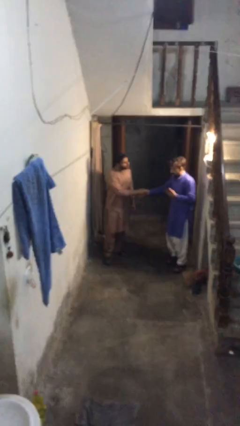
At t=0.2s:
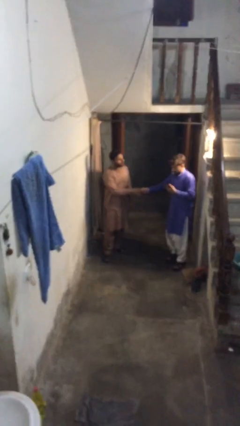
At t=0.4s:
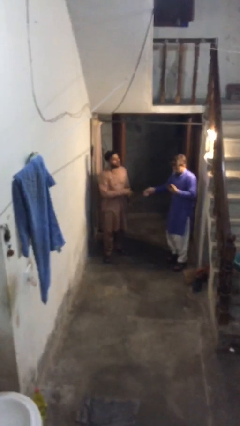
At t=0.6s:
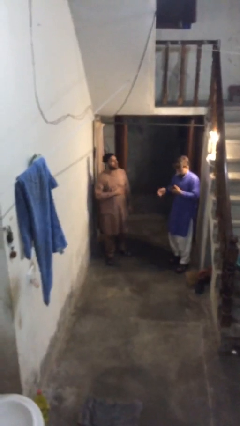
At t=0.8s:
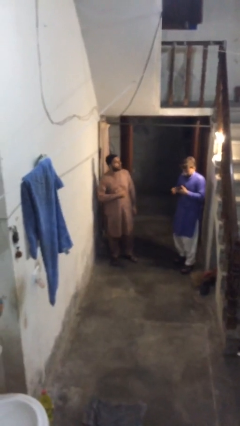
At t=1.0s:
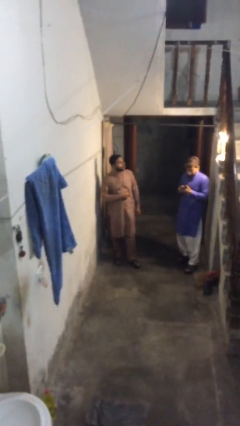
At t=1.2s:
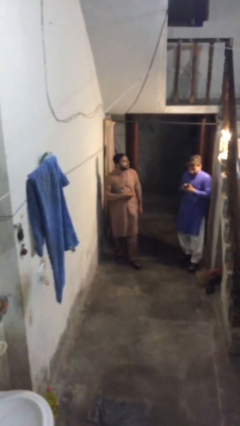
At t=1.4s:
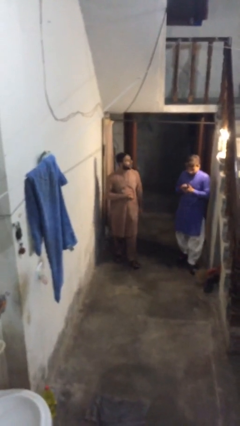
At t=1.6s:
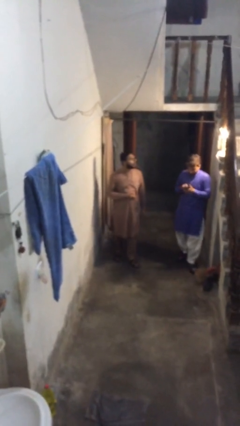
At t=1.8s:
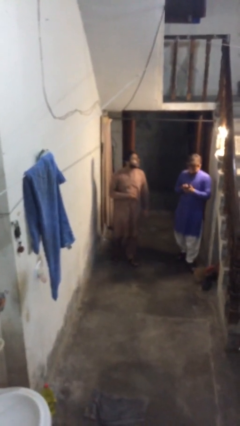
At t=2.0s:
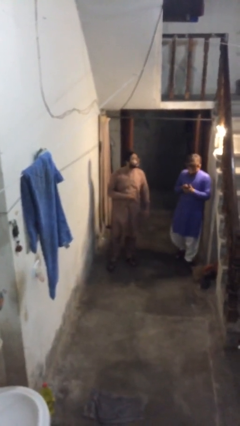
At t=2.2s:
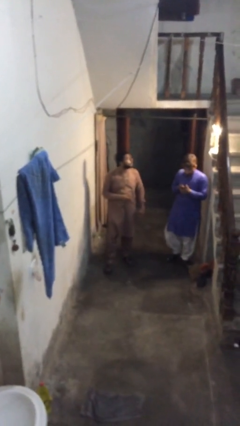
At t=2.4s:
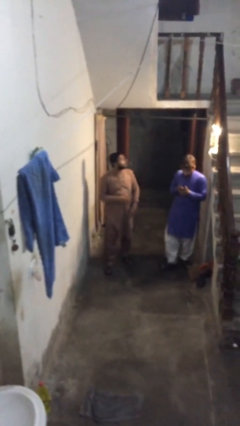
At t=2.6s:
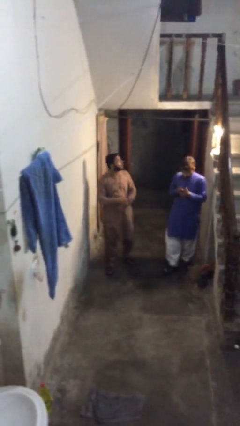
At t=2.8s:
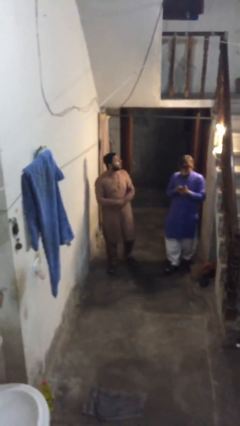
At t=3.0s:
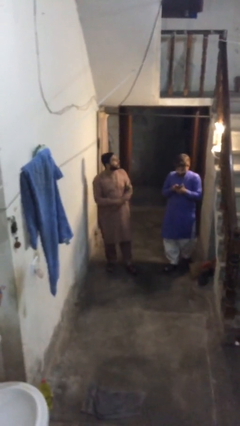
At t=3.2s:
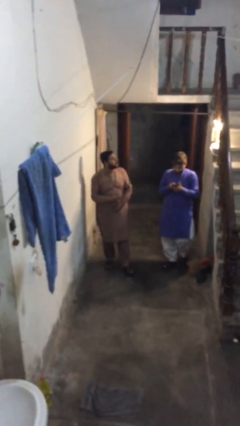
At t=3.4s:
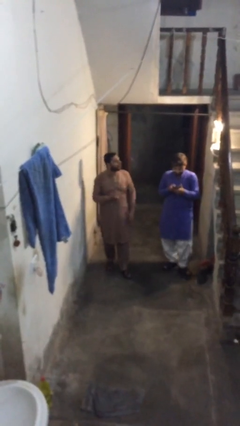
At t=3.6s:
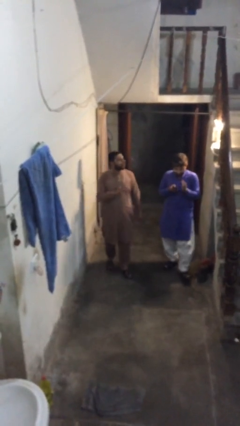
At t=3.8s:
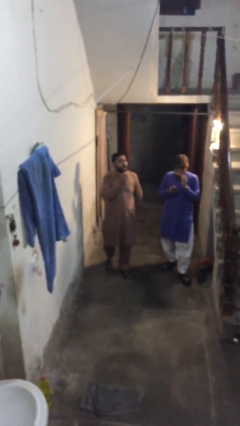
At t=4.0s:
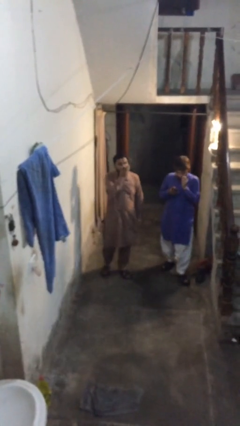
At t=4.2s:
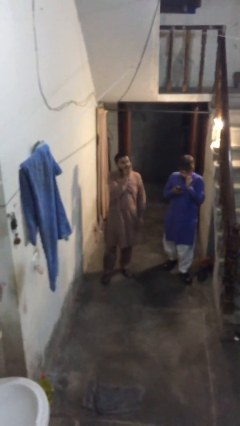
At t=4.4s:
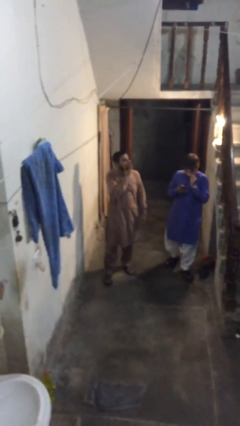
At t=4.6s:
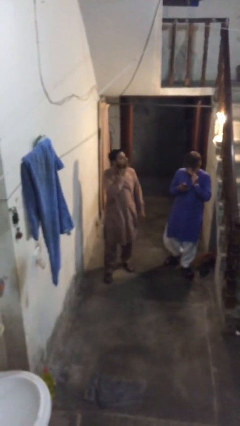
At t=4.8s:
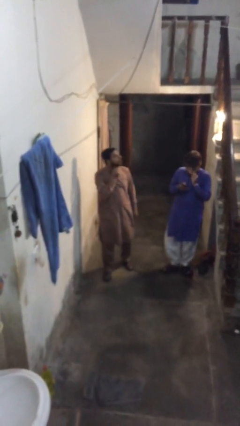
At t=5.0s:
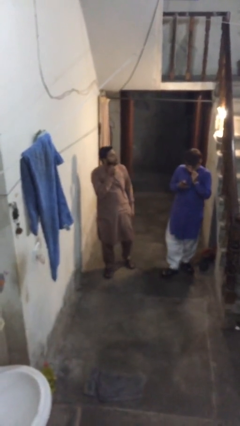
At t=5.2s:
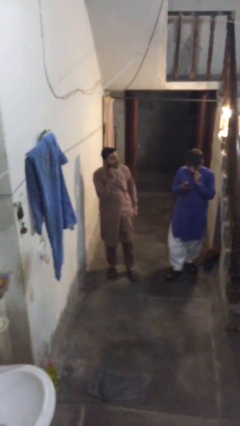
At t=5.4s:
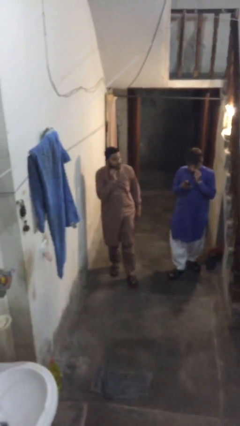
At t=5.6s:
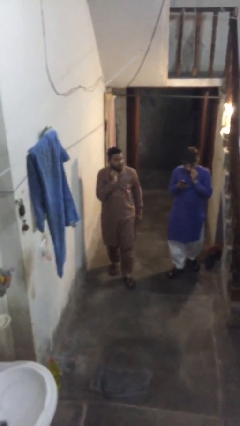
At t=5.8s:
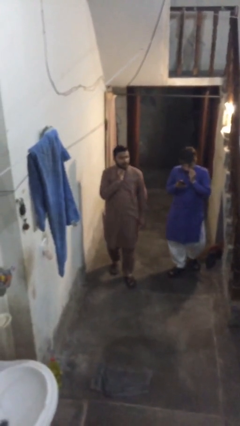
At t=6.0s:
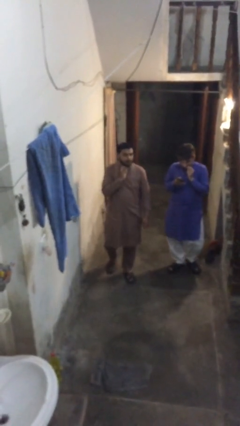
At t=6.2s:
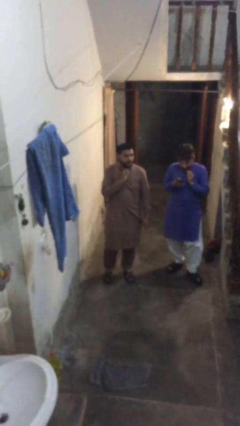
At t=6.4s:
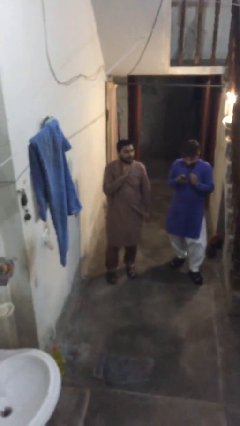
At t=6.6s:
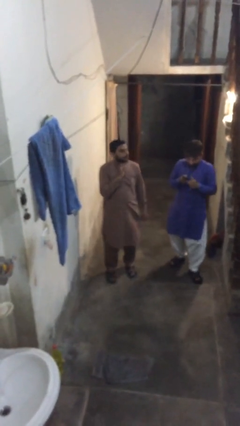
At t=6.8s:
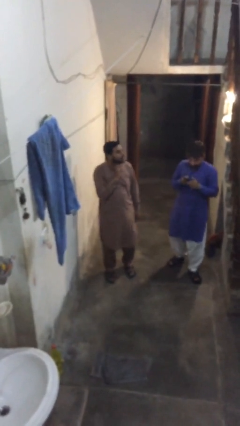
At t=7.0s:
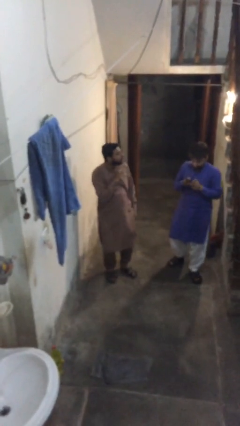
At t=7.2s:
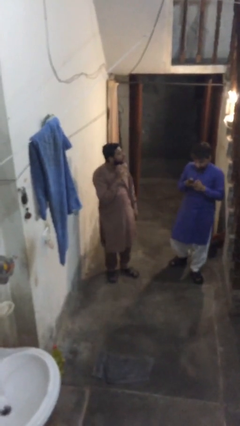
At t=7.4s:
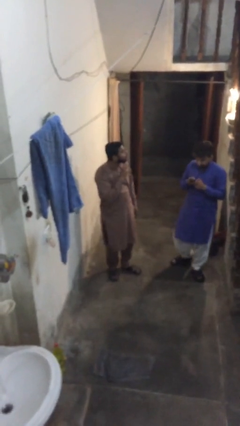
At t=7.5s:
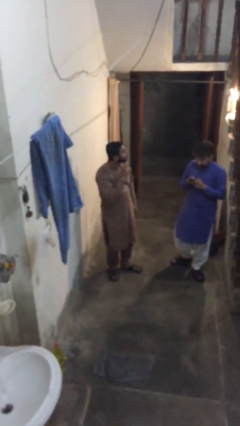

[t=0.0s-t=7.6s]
person talks to person

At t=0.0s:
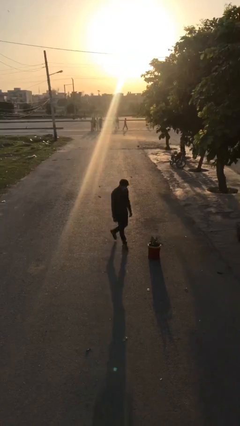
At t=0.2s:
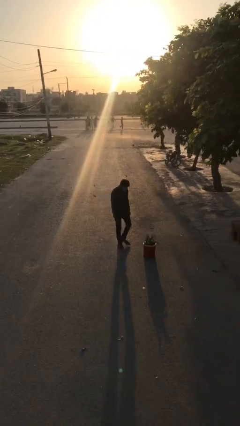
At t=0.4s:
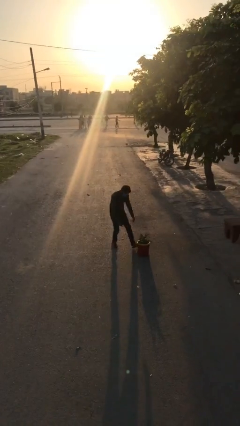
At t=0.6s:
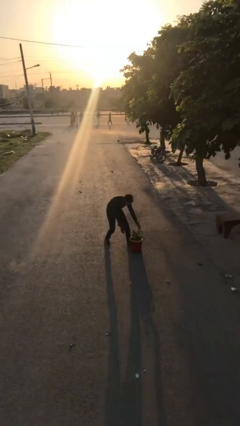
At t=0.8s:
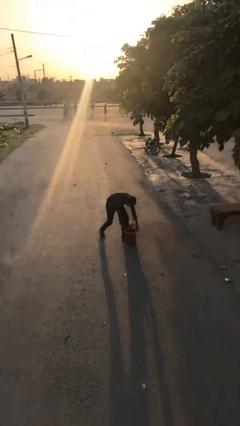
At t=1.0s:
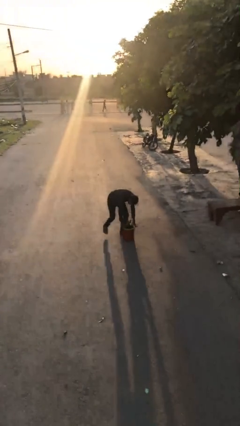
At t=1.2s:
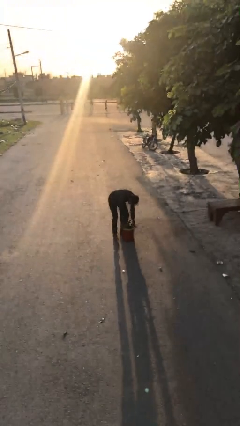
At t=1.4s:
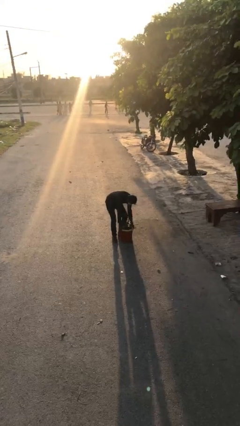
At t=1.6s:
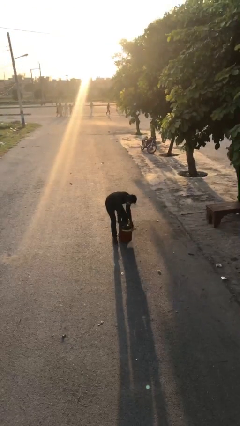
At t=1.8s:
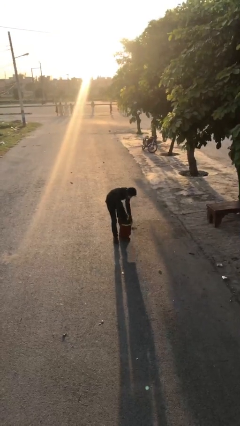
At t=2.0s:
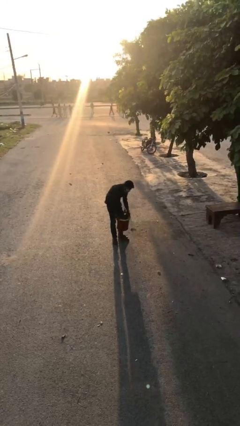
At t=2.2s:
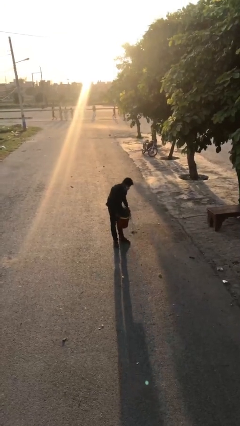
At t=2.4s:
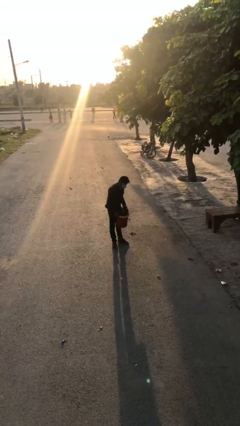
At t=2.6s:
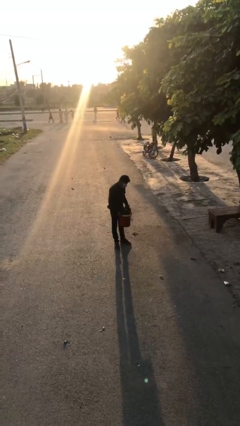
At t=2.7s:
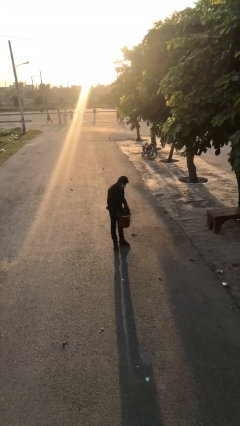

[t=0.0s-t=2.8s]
person picks up object from floor

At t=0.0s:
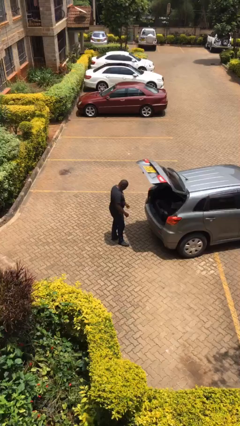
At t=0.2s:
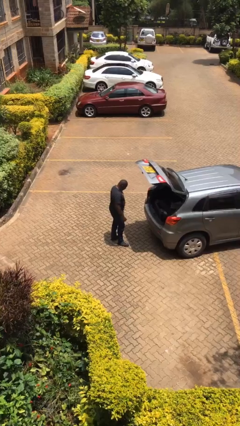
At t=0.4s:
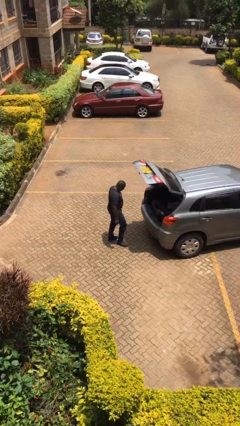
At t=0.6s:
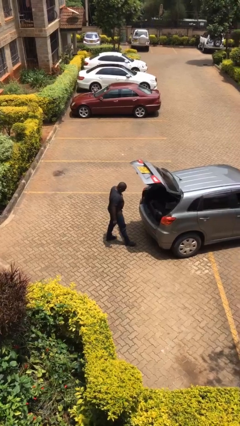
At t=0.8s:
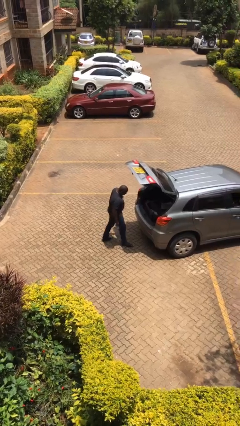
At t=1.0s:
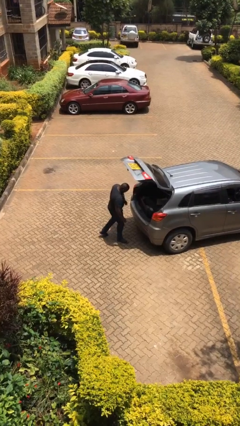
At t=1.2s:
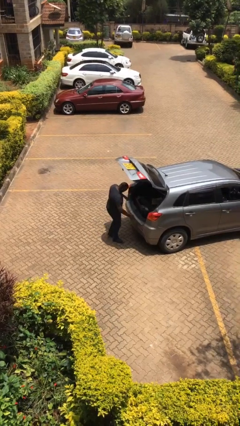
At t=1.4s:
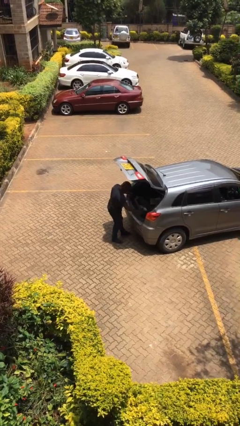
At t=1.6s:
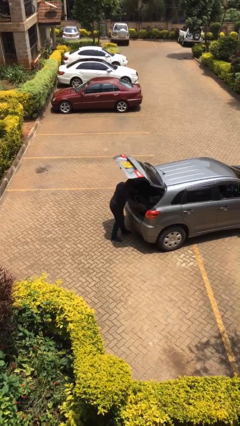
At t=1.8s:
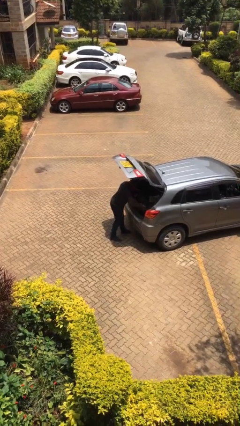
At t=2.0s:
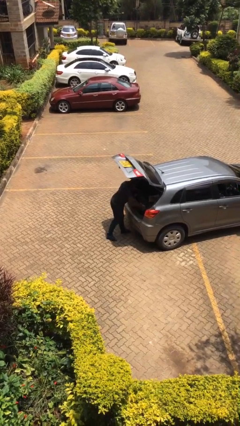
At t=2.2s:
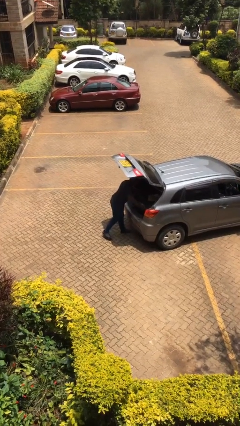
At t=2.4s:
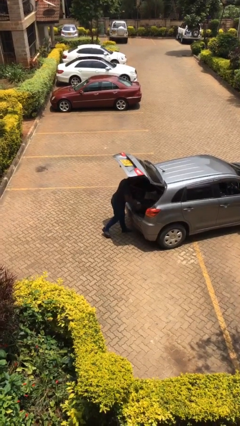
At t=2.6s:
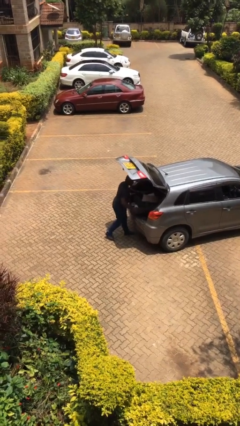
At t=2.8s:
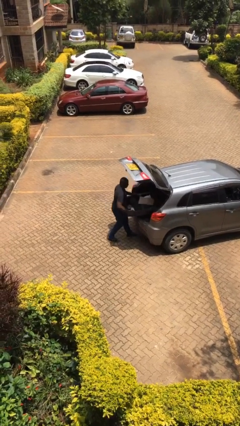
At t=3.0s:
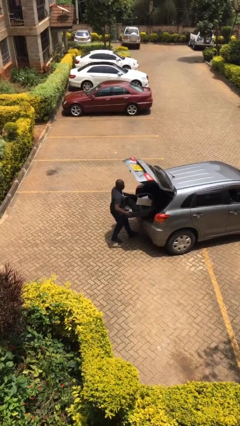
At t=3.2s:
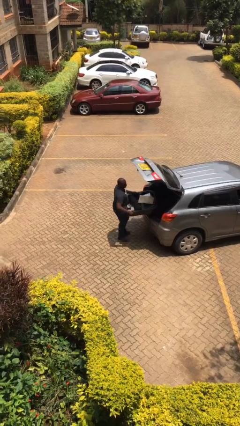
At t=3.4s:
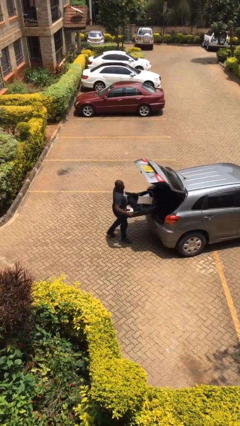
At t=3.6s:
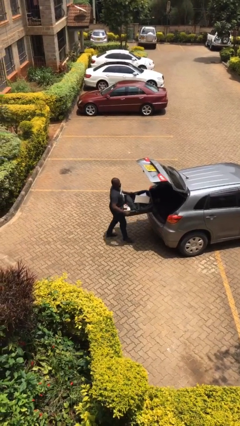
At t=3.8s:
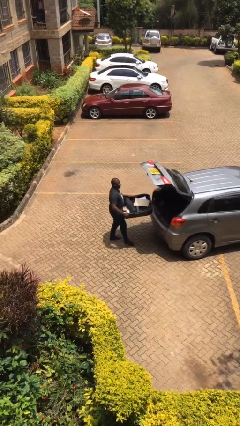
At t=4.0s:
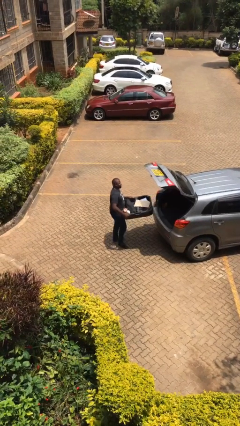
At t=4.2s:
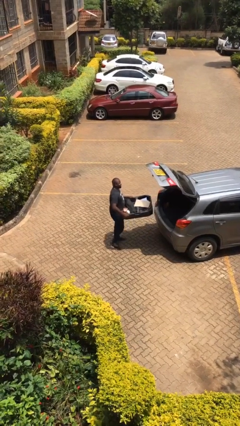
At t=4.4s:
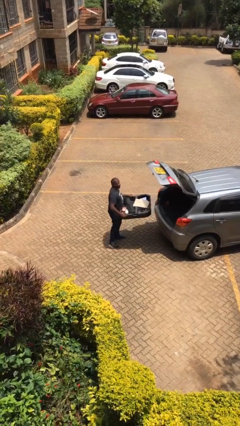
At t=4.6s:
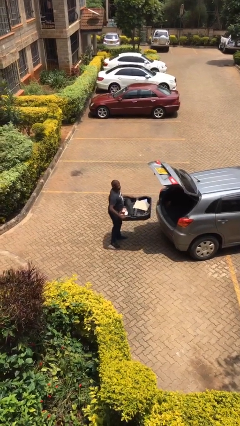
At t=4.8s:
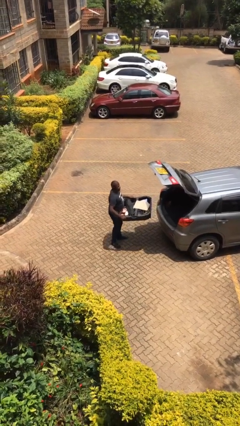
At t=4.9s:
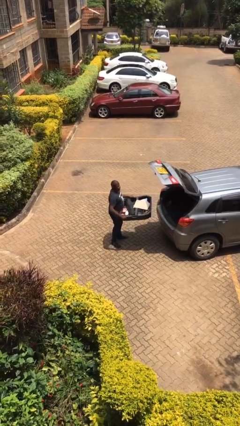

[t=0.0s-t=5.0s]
person unloads car

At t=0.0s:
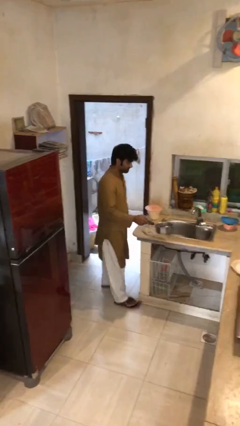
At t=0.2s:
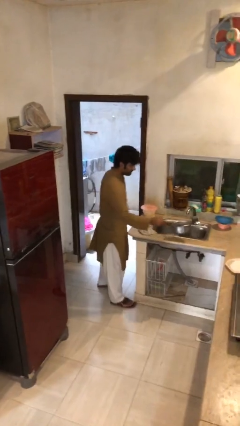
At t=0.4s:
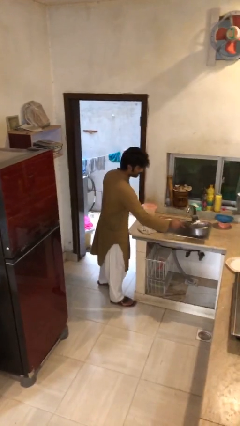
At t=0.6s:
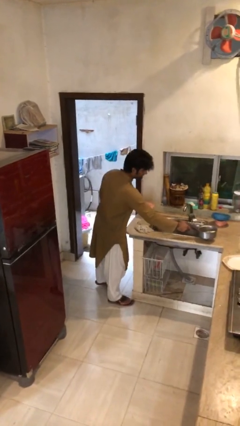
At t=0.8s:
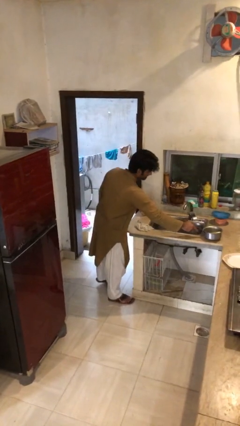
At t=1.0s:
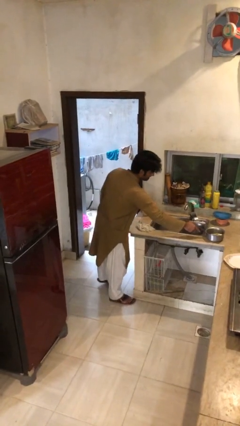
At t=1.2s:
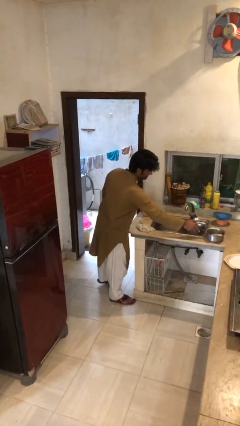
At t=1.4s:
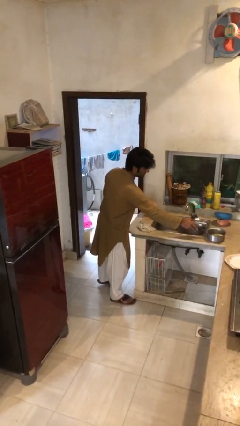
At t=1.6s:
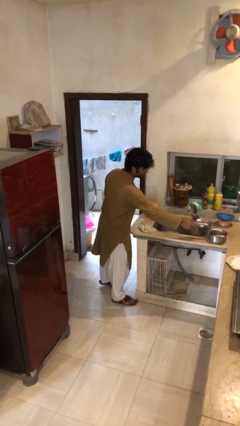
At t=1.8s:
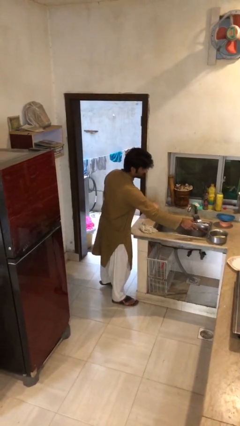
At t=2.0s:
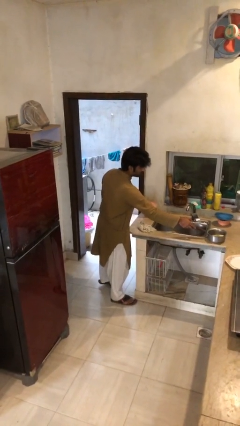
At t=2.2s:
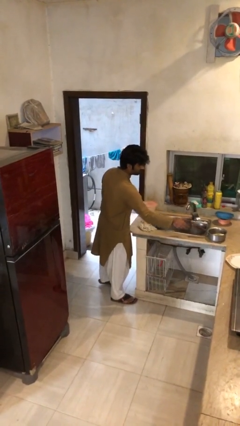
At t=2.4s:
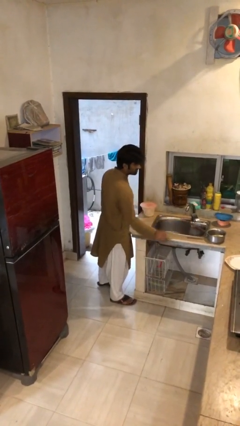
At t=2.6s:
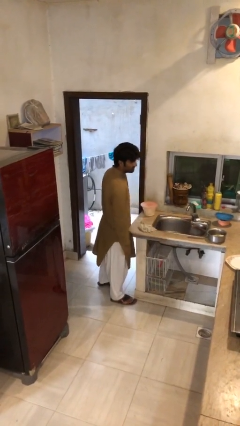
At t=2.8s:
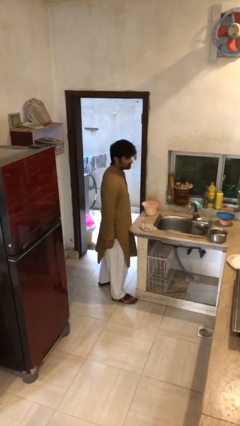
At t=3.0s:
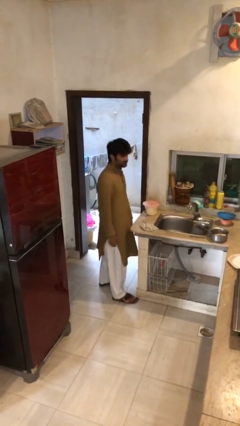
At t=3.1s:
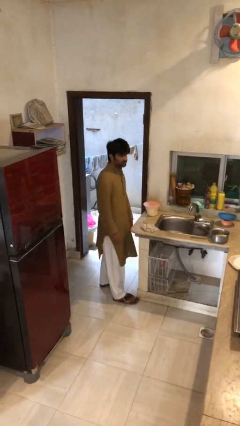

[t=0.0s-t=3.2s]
person puts down object on shelf
